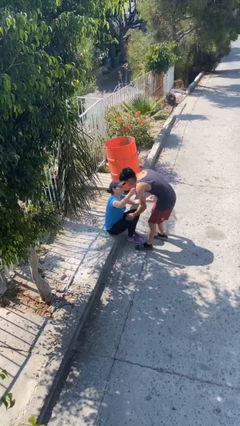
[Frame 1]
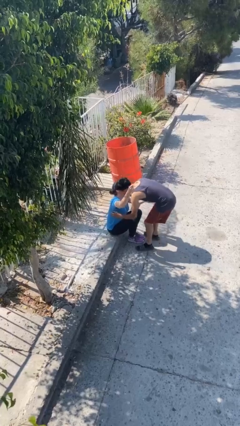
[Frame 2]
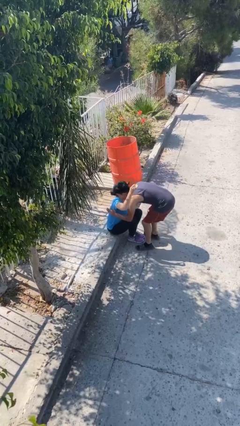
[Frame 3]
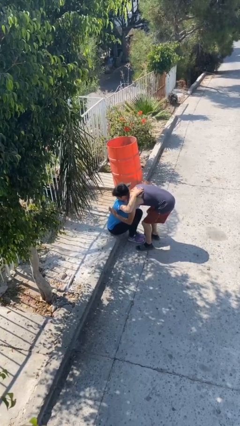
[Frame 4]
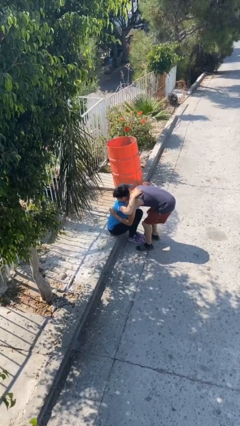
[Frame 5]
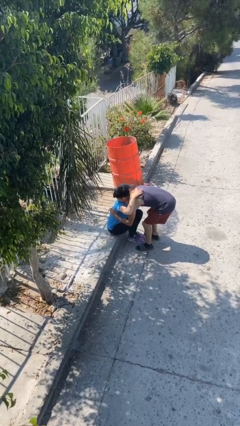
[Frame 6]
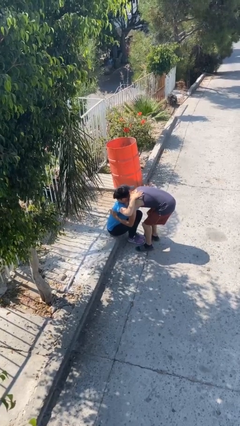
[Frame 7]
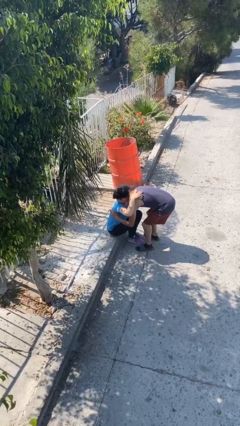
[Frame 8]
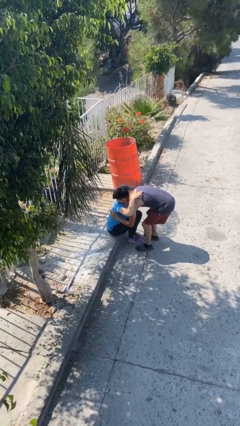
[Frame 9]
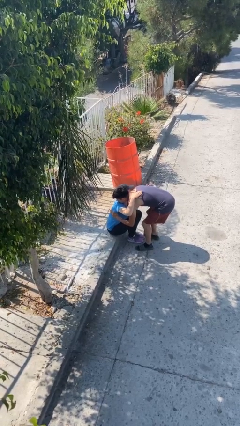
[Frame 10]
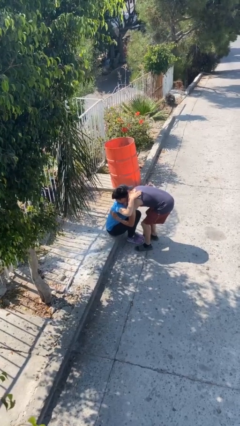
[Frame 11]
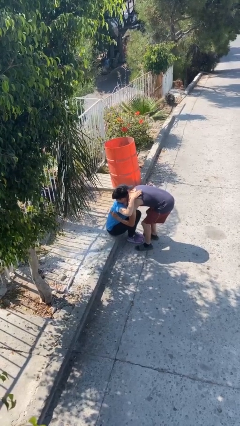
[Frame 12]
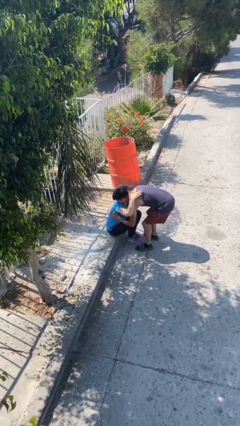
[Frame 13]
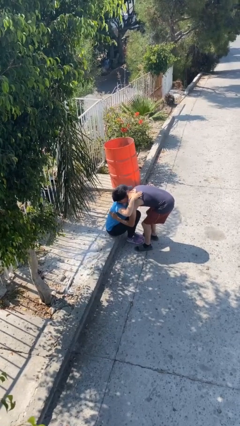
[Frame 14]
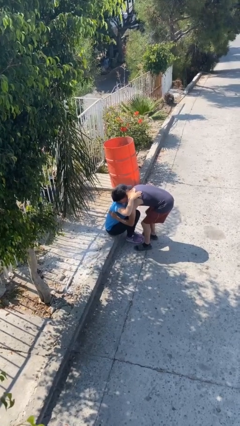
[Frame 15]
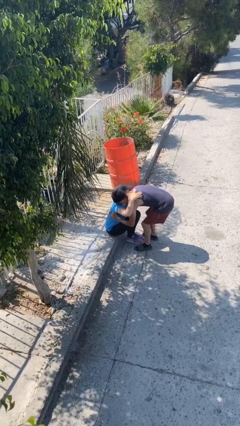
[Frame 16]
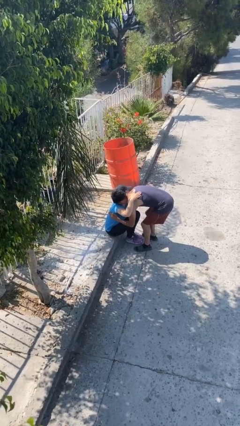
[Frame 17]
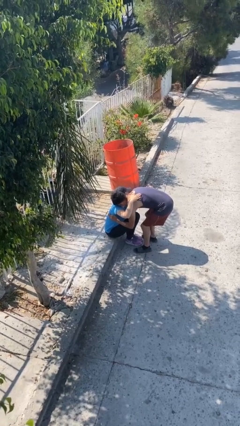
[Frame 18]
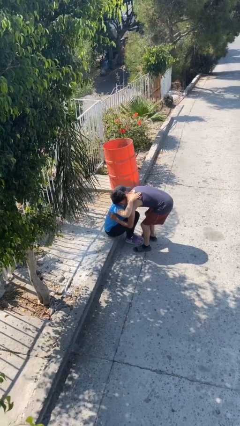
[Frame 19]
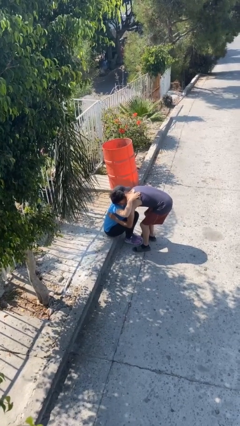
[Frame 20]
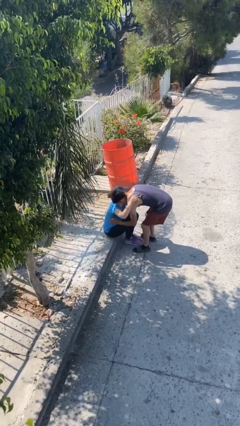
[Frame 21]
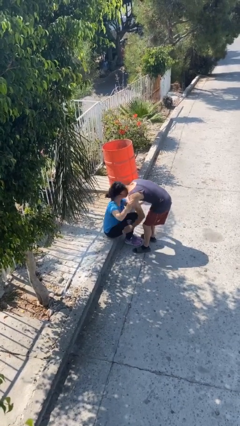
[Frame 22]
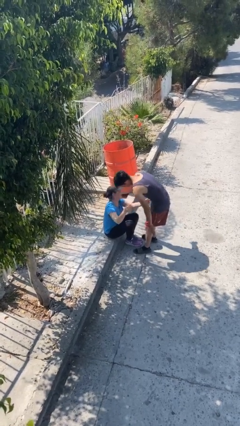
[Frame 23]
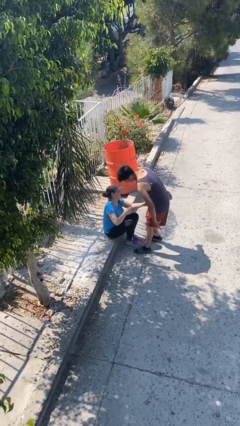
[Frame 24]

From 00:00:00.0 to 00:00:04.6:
person embraces person

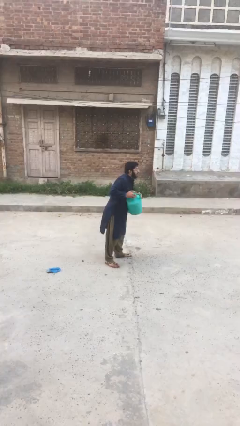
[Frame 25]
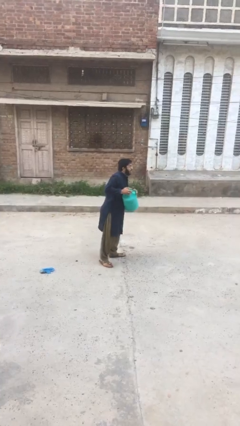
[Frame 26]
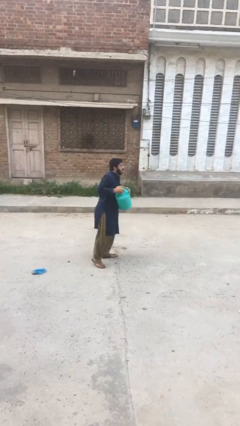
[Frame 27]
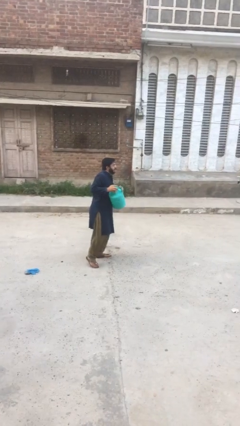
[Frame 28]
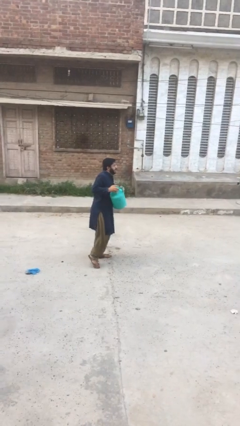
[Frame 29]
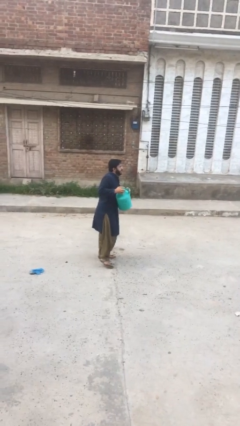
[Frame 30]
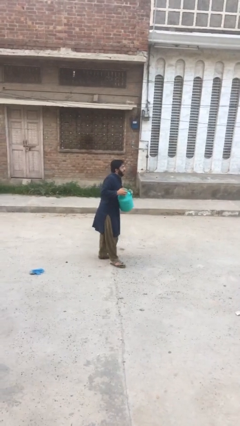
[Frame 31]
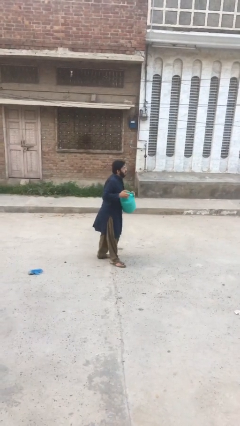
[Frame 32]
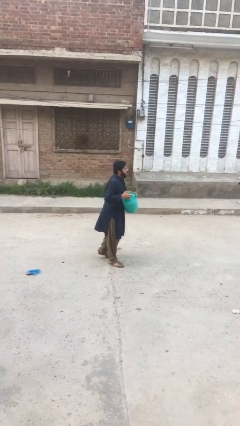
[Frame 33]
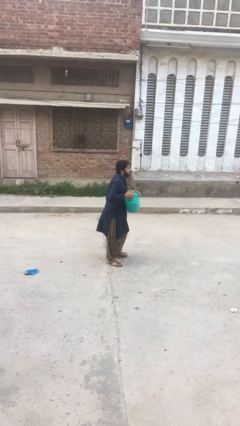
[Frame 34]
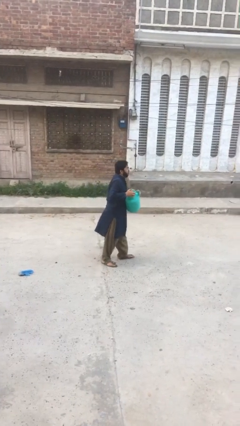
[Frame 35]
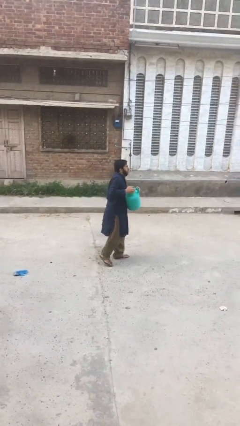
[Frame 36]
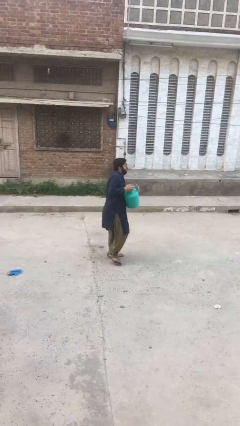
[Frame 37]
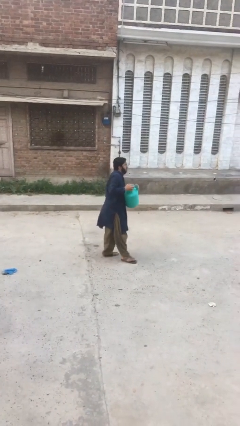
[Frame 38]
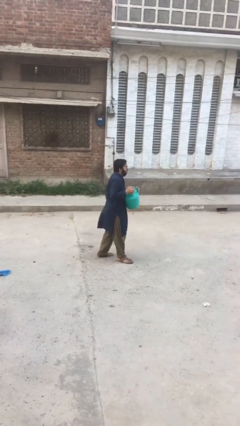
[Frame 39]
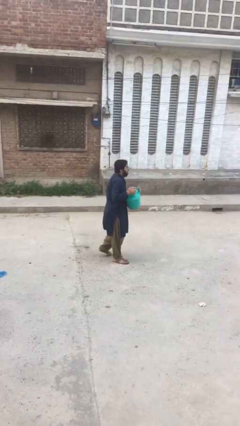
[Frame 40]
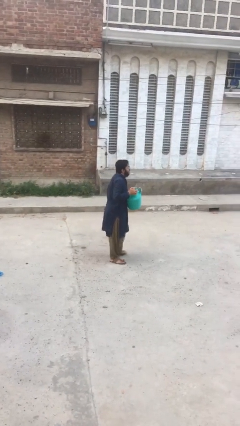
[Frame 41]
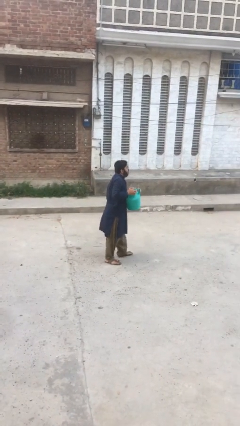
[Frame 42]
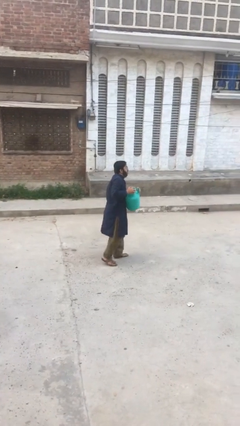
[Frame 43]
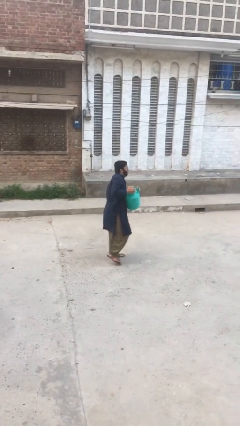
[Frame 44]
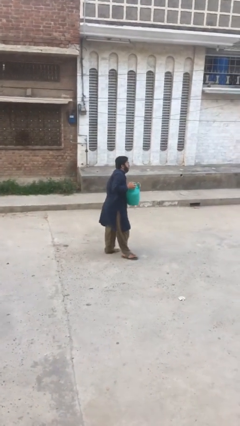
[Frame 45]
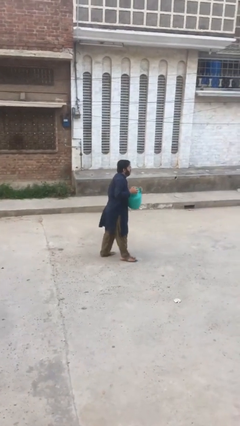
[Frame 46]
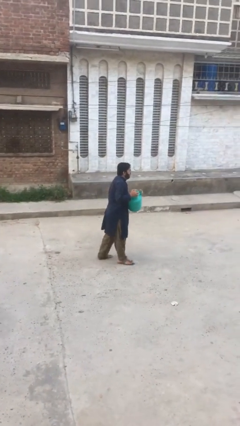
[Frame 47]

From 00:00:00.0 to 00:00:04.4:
person carries heavy object

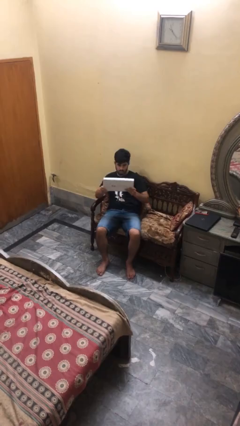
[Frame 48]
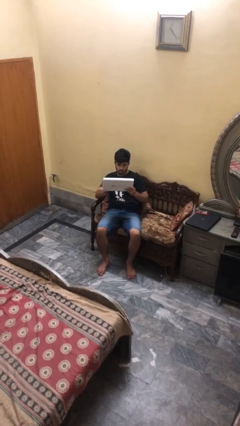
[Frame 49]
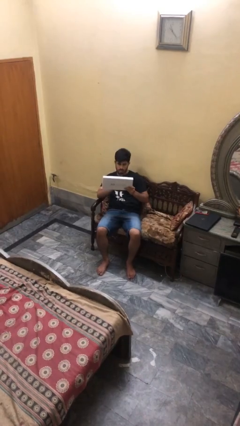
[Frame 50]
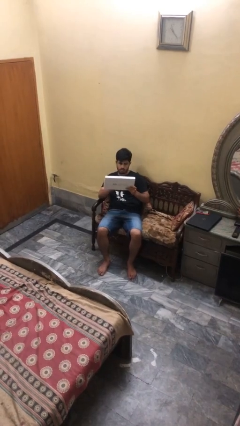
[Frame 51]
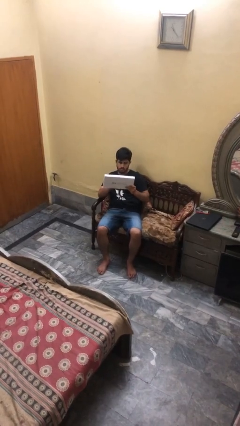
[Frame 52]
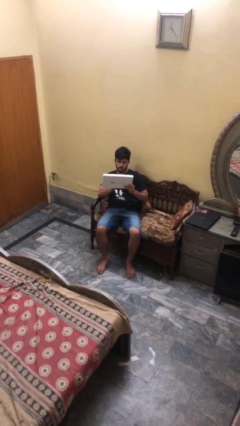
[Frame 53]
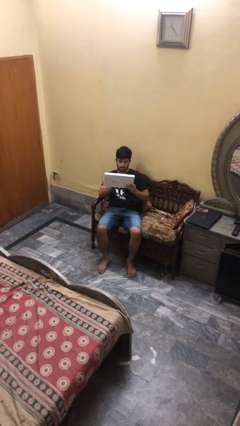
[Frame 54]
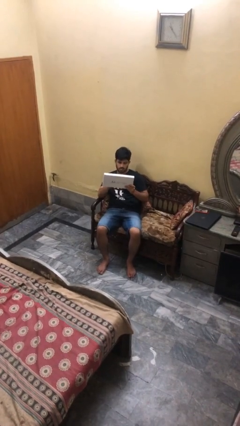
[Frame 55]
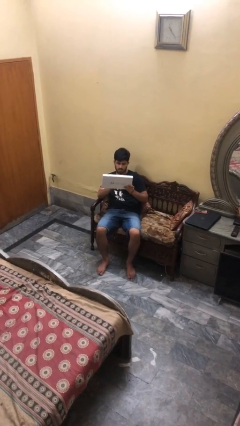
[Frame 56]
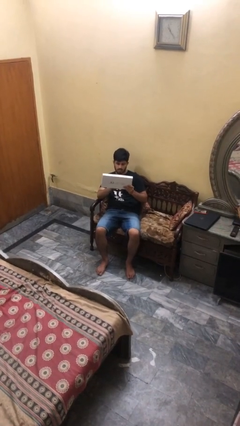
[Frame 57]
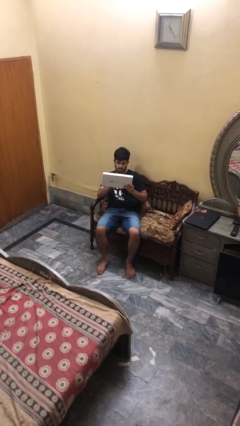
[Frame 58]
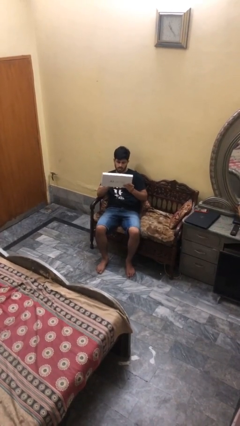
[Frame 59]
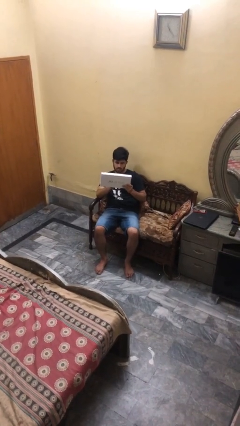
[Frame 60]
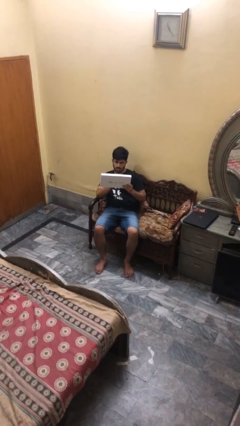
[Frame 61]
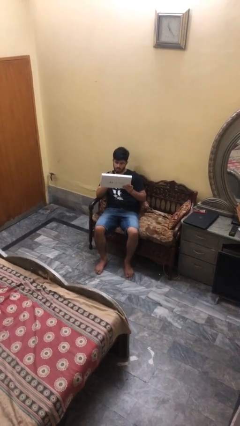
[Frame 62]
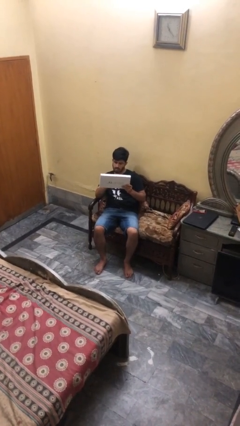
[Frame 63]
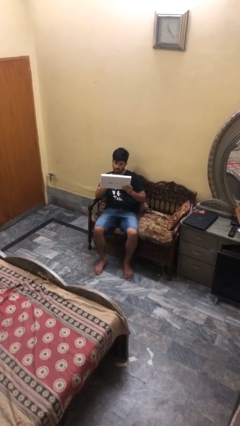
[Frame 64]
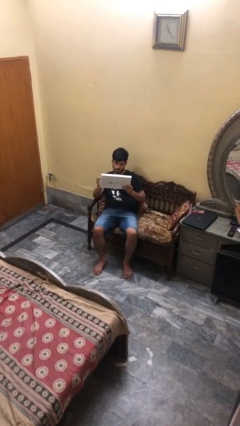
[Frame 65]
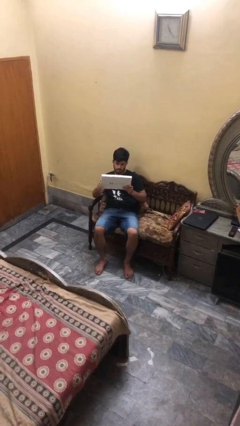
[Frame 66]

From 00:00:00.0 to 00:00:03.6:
person interacts with tablet

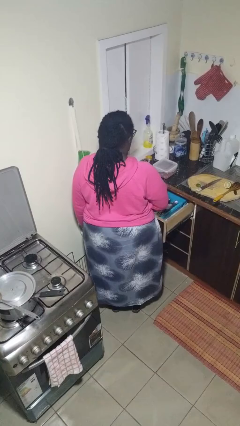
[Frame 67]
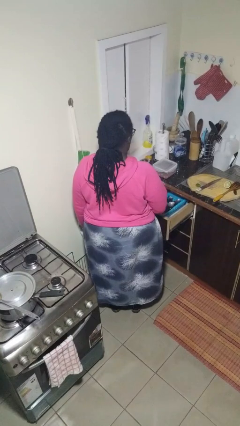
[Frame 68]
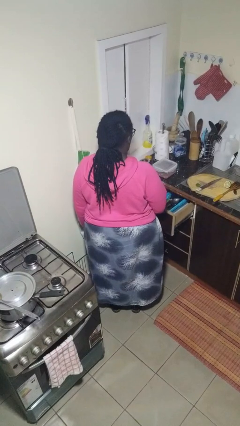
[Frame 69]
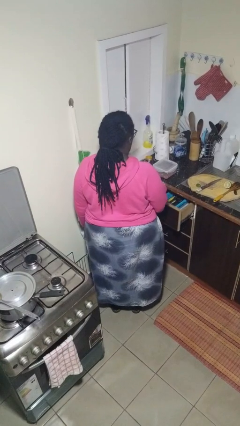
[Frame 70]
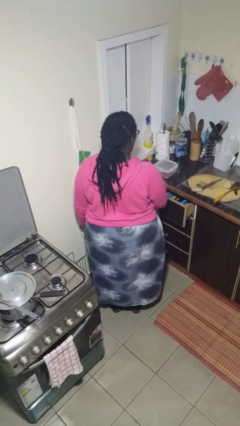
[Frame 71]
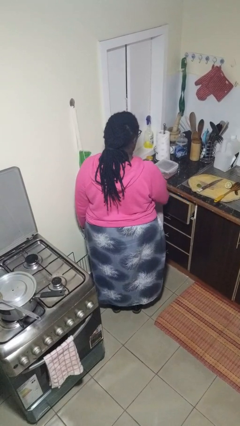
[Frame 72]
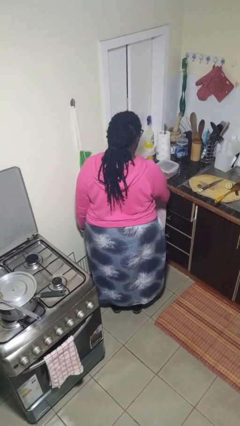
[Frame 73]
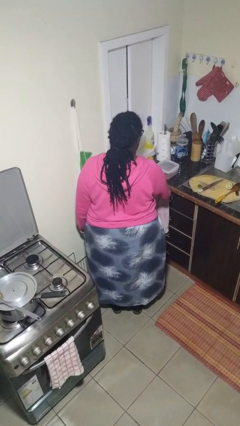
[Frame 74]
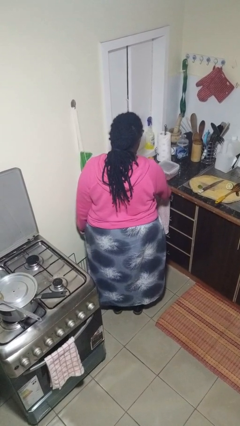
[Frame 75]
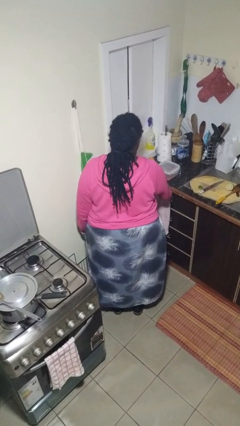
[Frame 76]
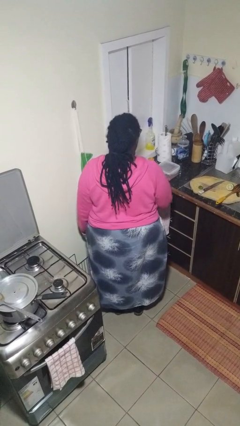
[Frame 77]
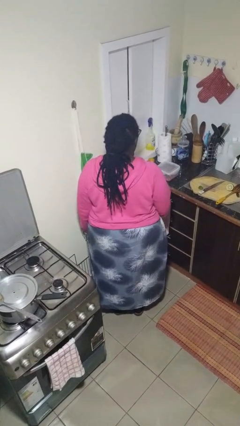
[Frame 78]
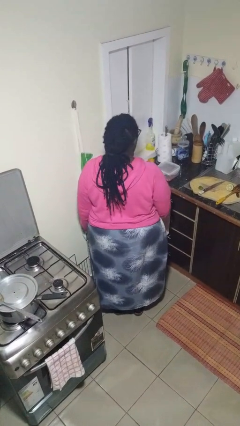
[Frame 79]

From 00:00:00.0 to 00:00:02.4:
person closes kitchen drawer

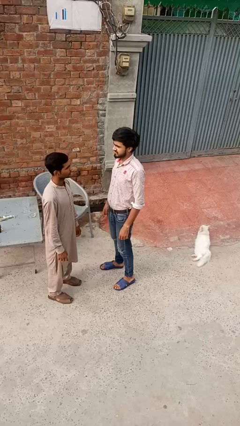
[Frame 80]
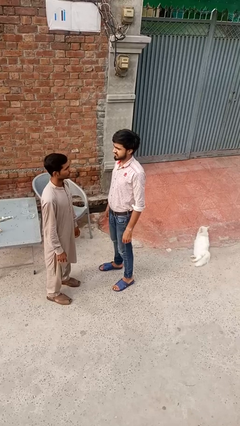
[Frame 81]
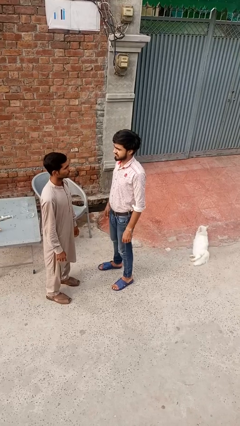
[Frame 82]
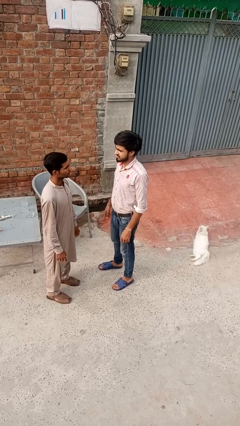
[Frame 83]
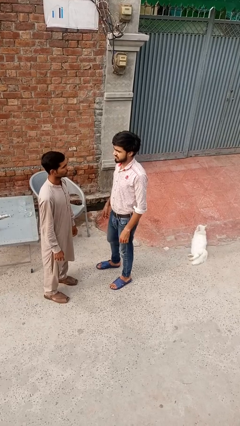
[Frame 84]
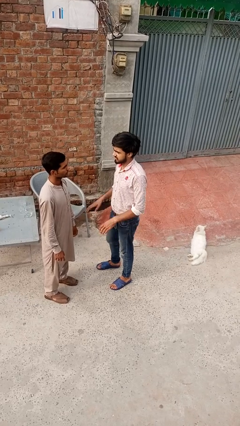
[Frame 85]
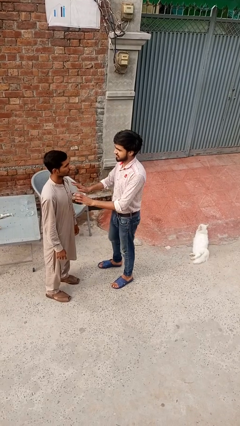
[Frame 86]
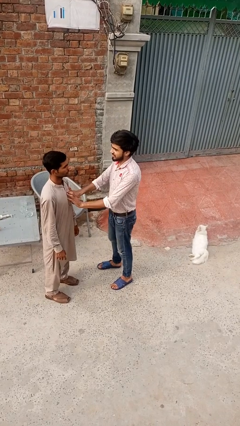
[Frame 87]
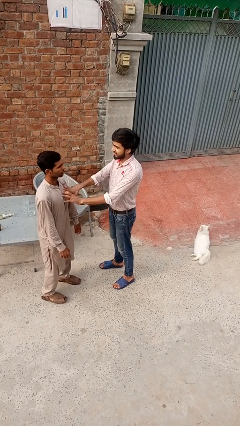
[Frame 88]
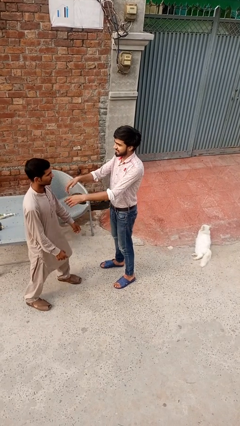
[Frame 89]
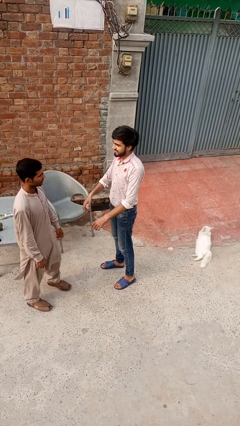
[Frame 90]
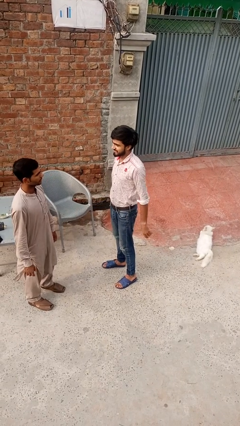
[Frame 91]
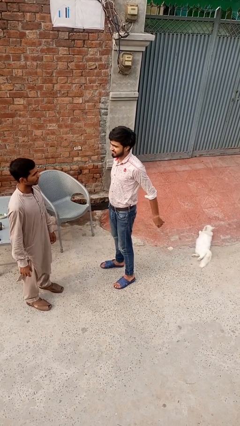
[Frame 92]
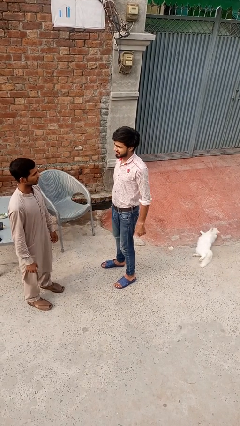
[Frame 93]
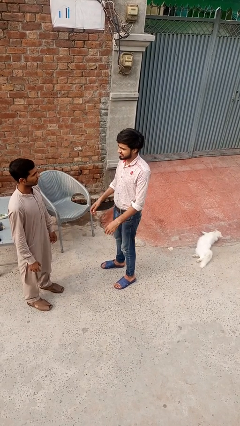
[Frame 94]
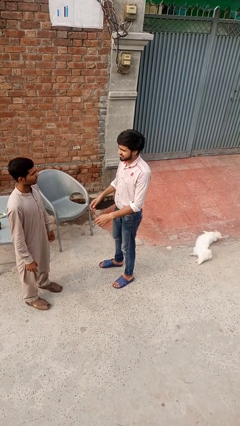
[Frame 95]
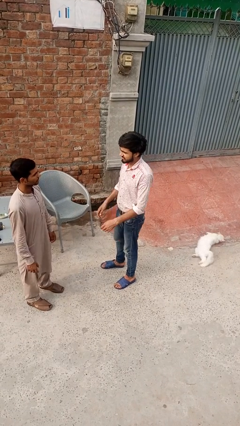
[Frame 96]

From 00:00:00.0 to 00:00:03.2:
person grabs person by forearm
